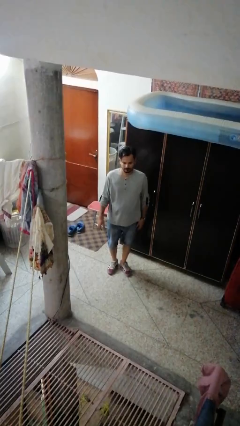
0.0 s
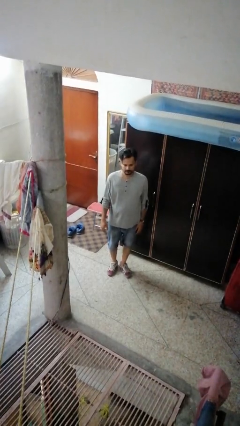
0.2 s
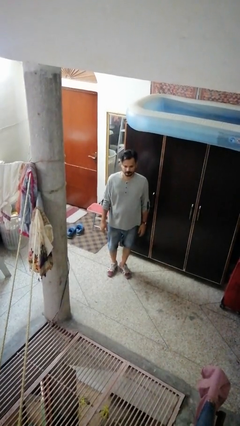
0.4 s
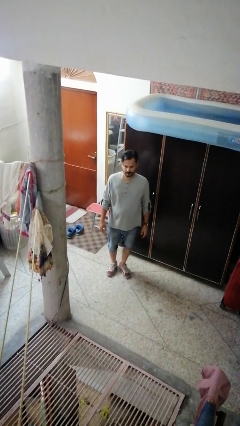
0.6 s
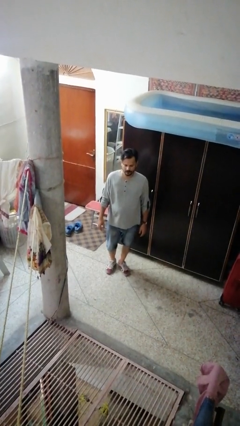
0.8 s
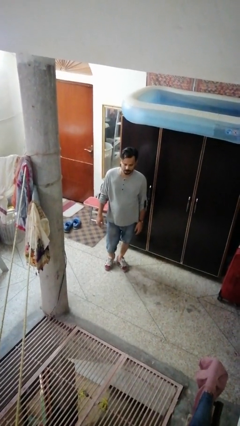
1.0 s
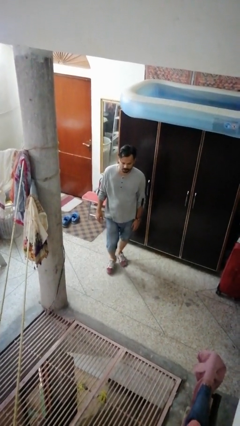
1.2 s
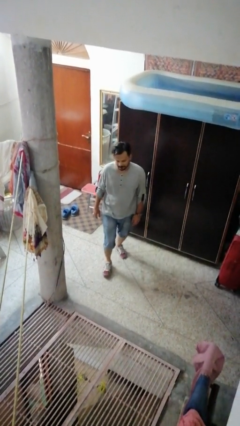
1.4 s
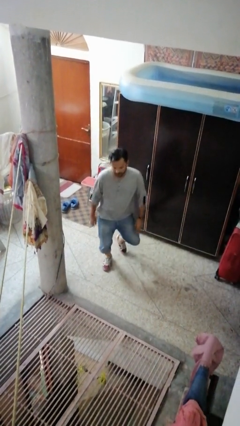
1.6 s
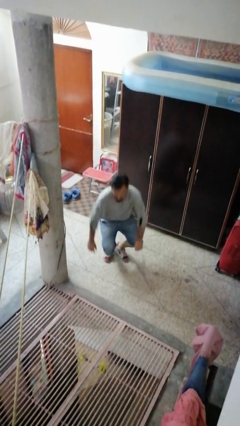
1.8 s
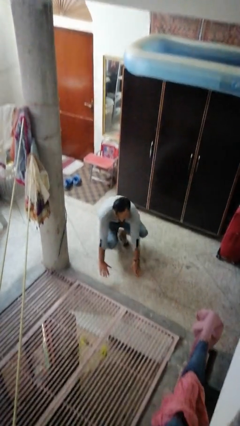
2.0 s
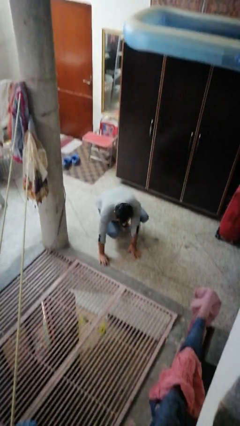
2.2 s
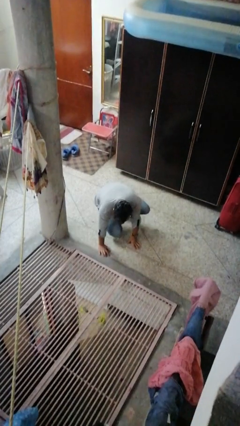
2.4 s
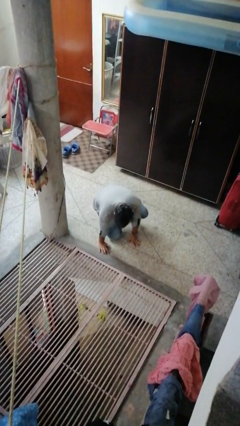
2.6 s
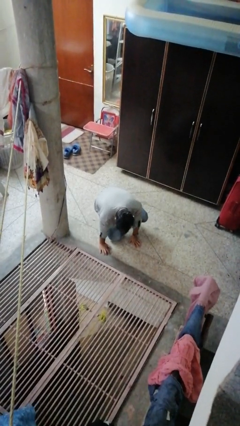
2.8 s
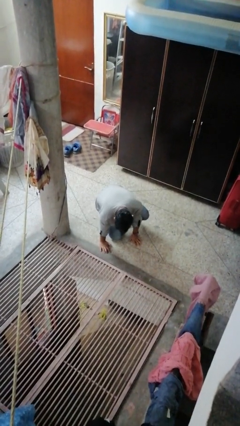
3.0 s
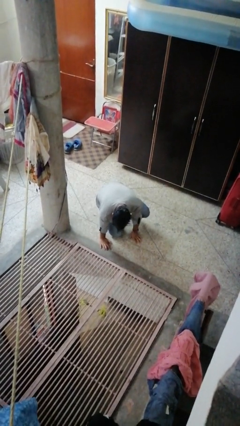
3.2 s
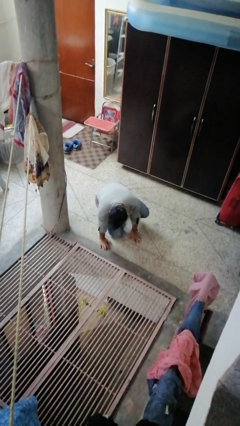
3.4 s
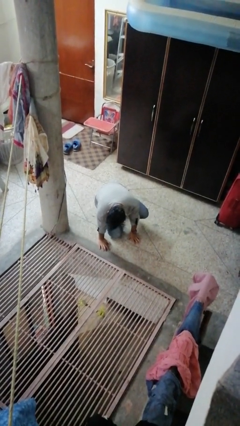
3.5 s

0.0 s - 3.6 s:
person falls while standing

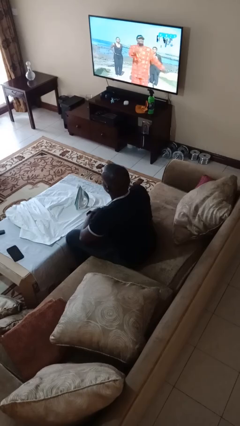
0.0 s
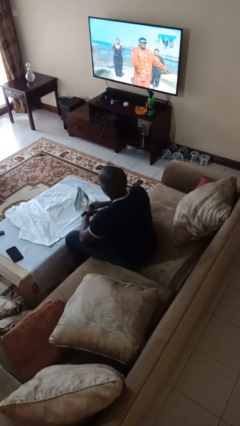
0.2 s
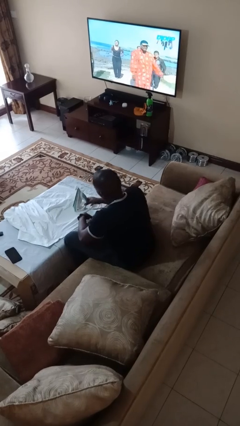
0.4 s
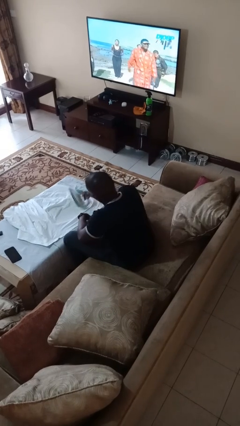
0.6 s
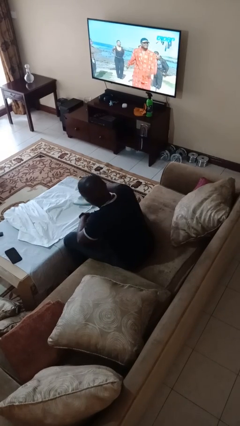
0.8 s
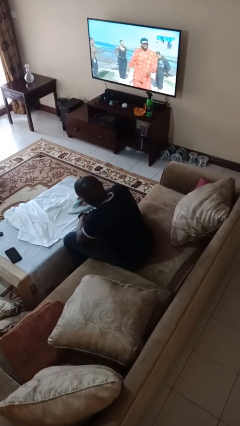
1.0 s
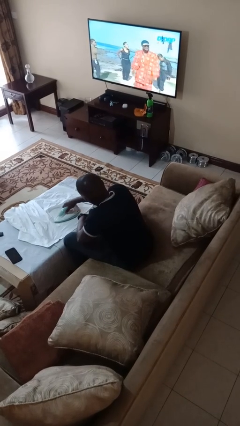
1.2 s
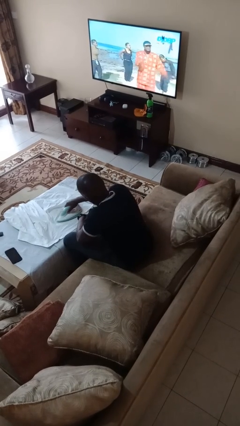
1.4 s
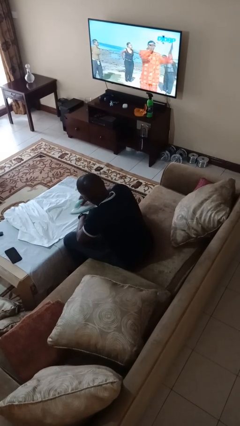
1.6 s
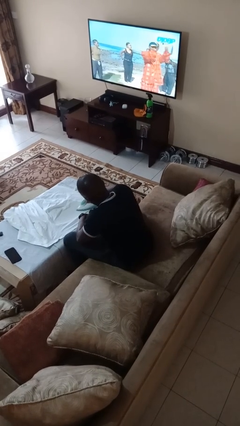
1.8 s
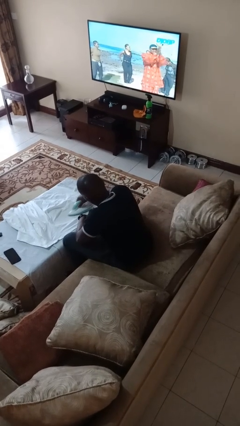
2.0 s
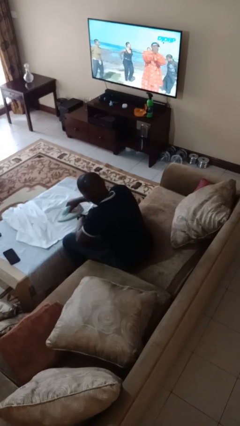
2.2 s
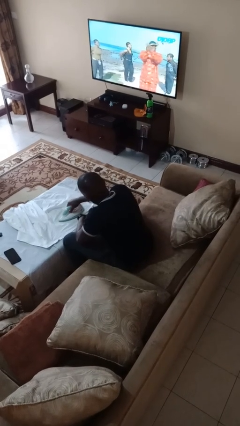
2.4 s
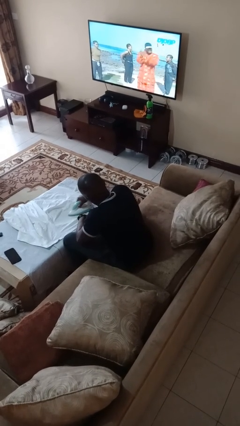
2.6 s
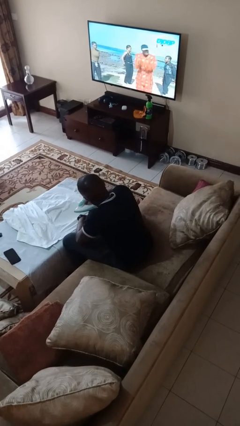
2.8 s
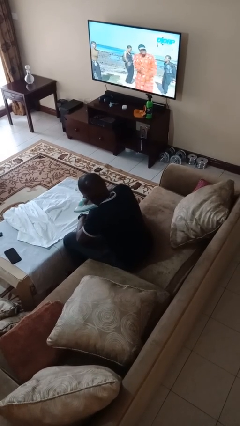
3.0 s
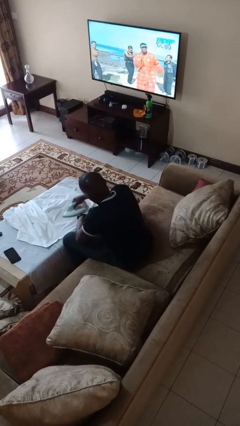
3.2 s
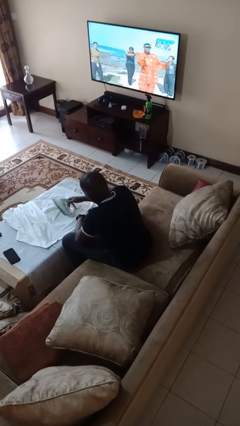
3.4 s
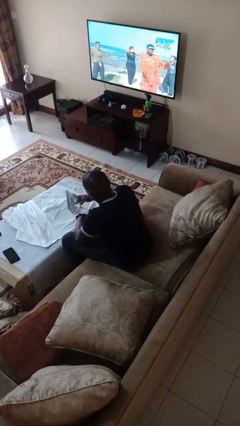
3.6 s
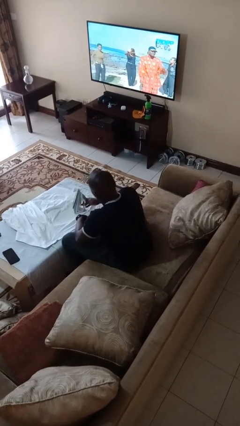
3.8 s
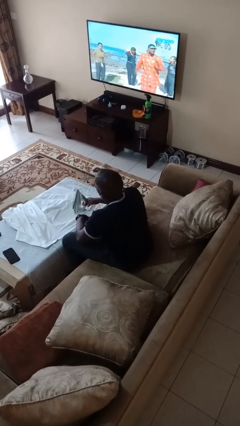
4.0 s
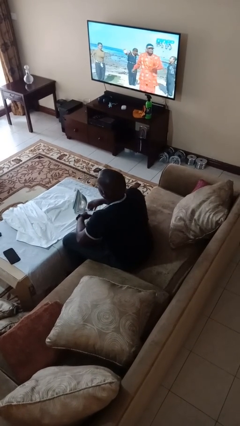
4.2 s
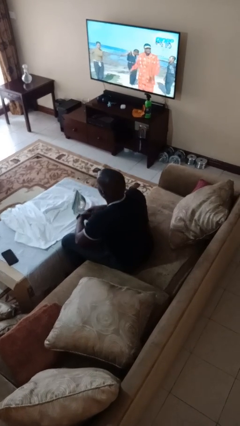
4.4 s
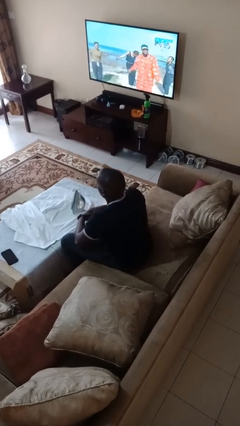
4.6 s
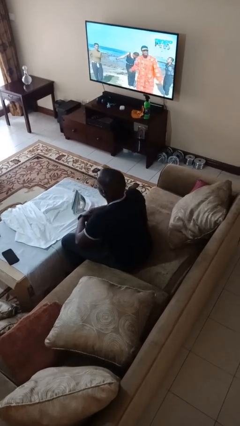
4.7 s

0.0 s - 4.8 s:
person irons clothes

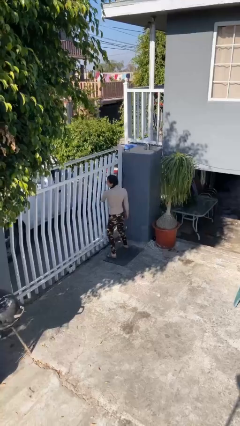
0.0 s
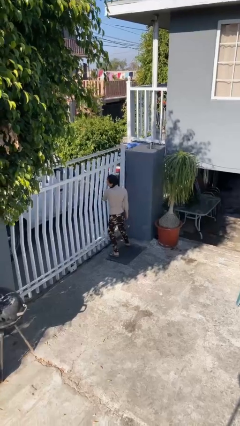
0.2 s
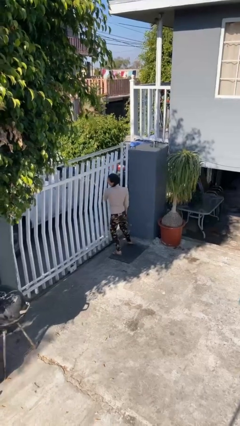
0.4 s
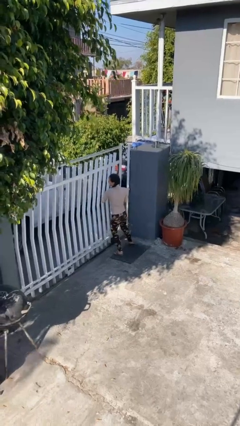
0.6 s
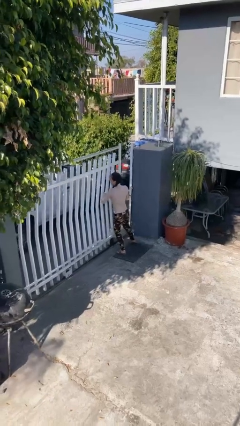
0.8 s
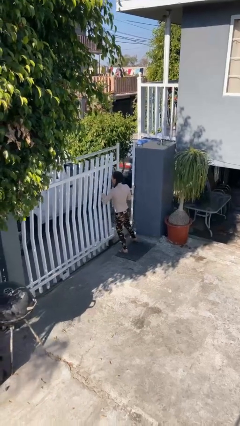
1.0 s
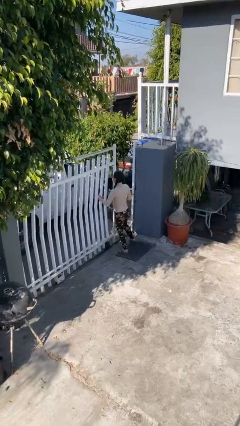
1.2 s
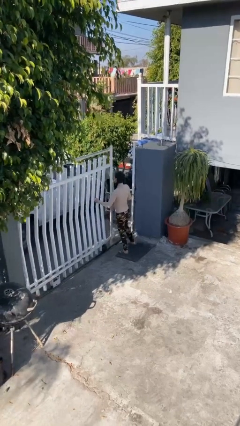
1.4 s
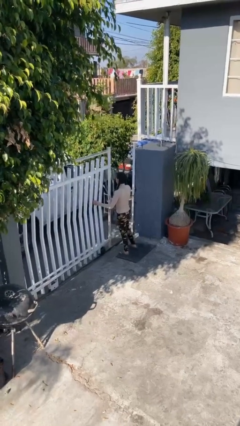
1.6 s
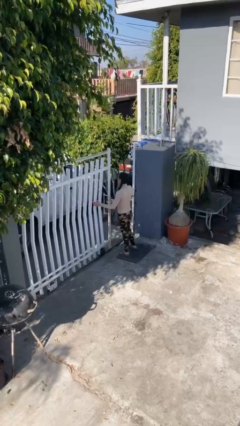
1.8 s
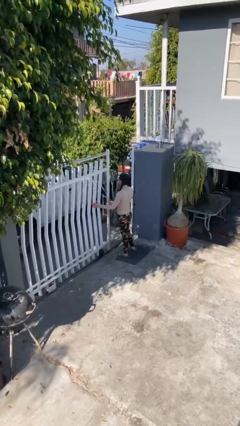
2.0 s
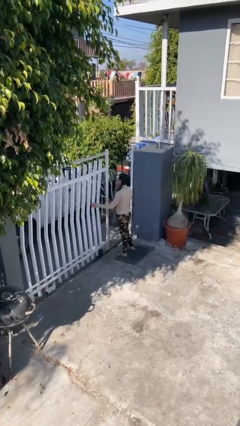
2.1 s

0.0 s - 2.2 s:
person opens facility door

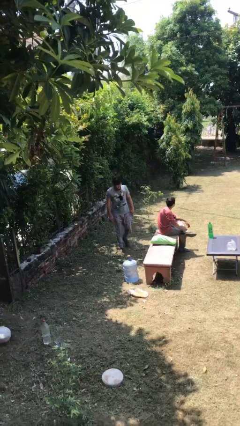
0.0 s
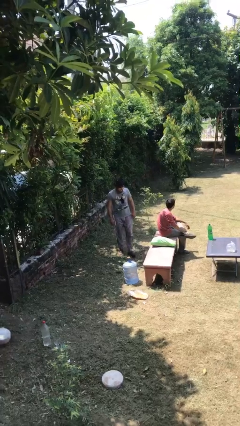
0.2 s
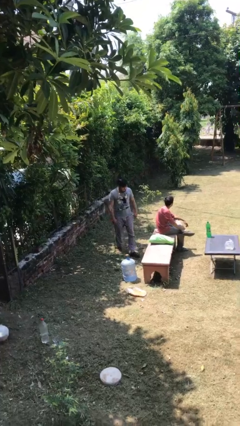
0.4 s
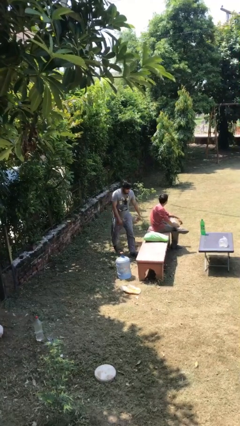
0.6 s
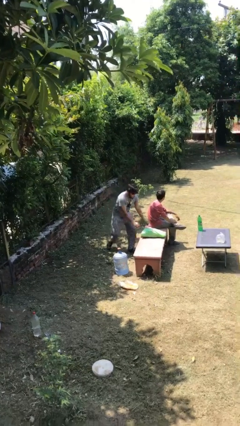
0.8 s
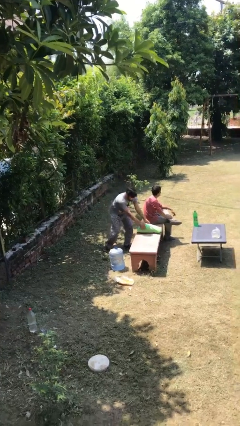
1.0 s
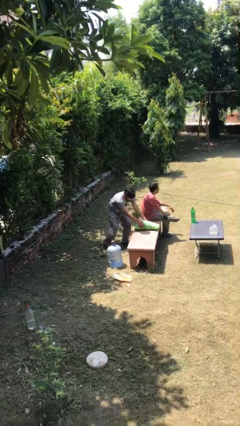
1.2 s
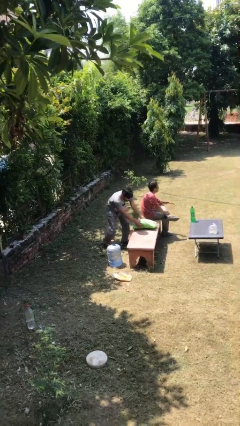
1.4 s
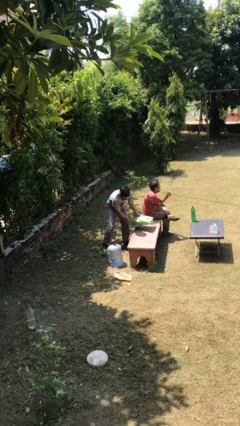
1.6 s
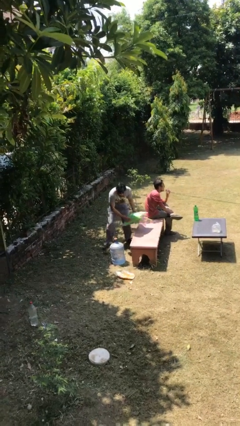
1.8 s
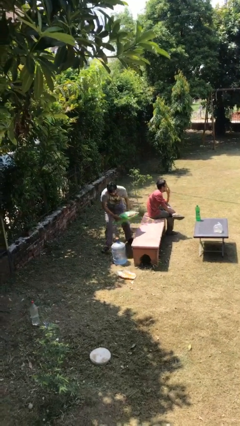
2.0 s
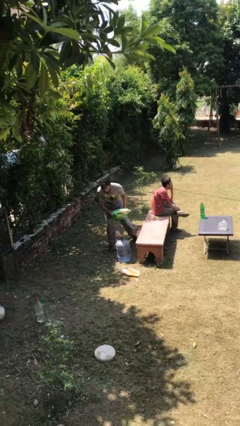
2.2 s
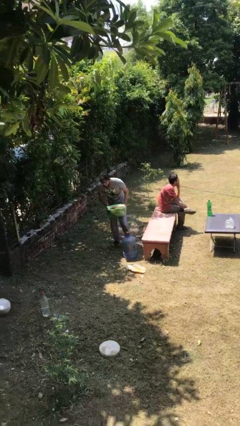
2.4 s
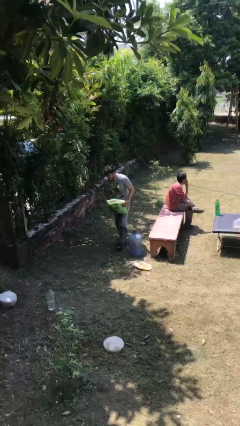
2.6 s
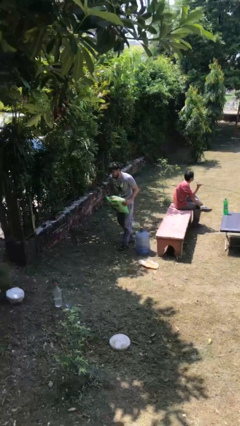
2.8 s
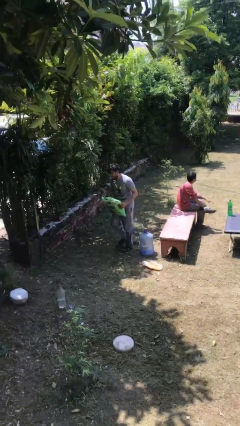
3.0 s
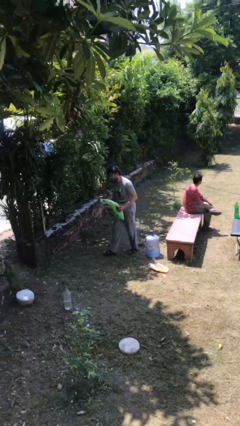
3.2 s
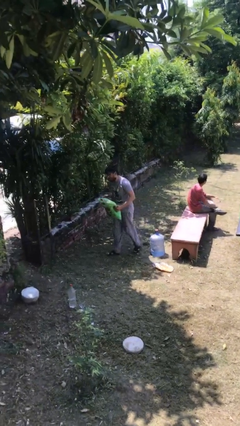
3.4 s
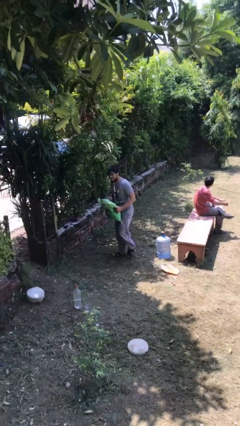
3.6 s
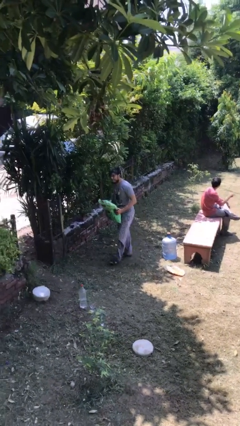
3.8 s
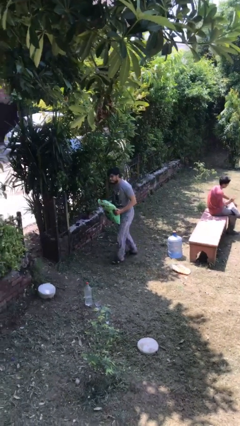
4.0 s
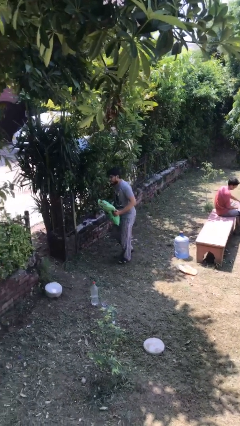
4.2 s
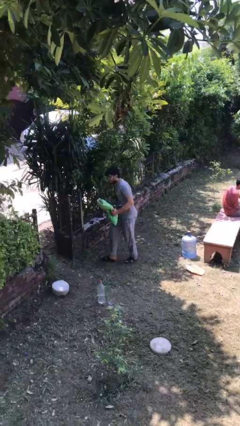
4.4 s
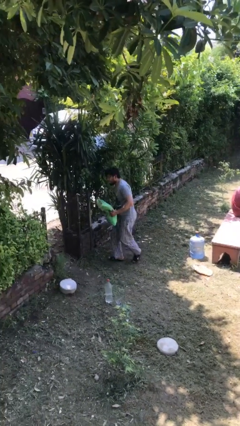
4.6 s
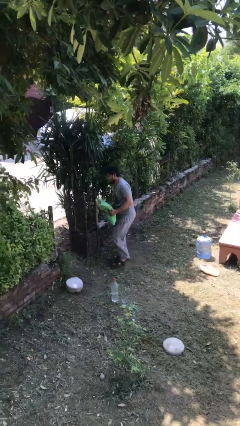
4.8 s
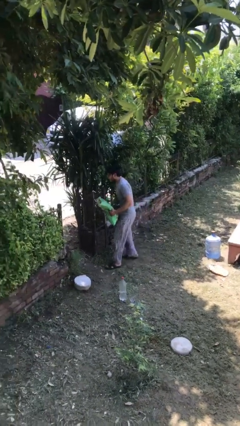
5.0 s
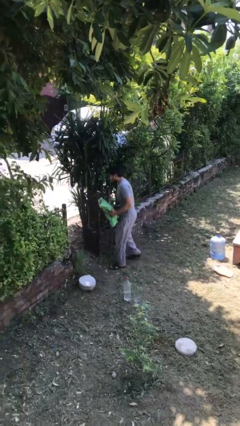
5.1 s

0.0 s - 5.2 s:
person steals object from person

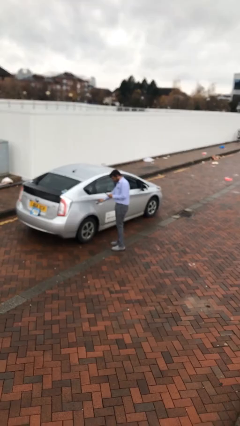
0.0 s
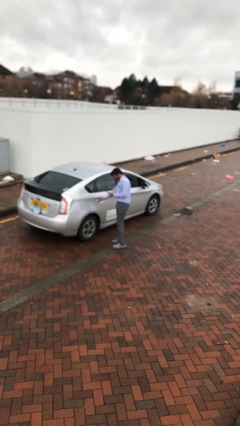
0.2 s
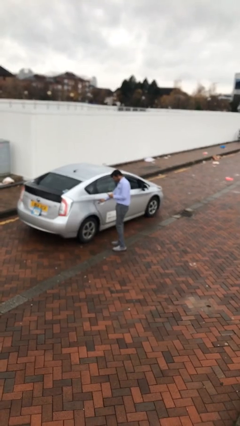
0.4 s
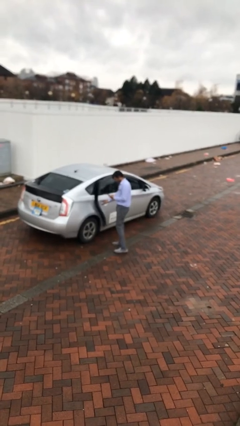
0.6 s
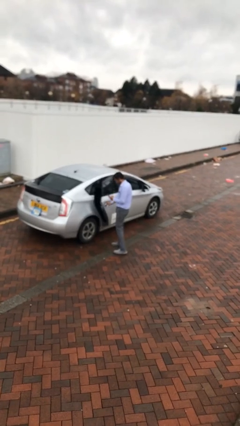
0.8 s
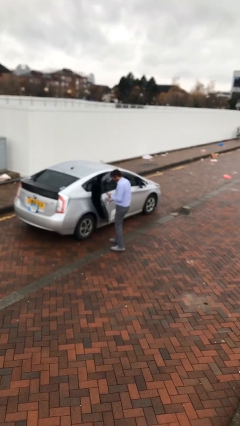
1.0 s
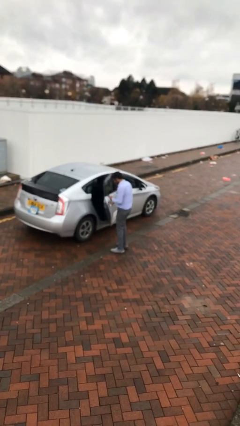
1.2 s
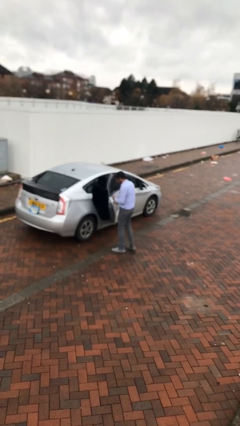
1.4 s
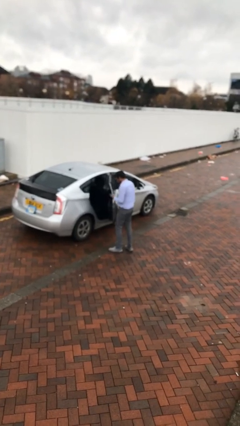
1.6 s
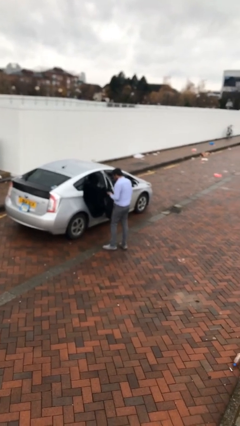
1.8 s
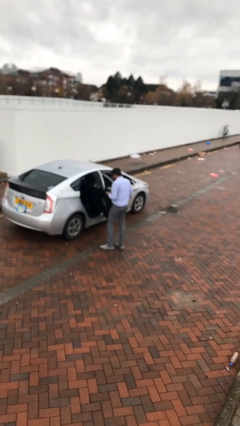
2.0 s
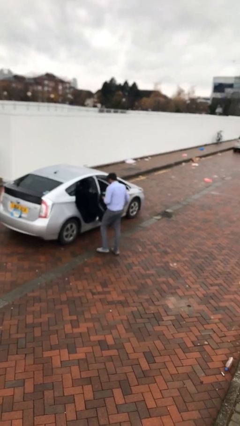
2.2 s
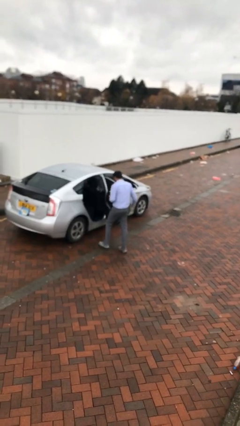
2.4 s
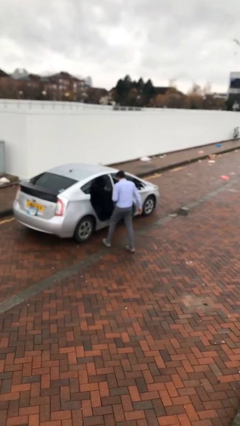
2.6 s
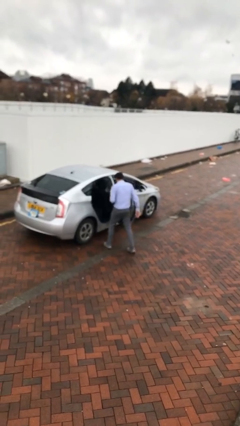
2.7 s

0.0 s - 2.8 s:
person opens car door
